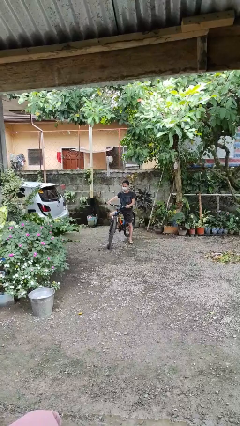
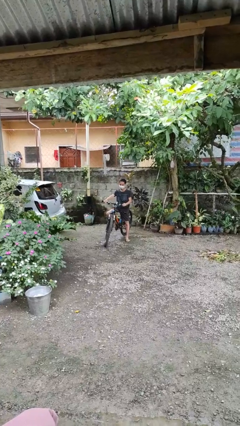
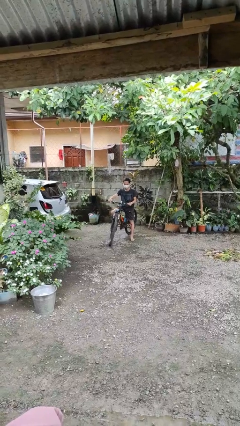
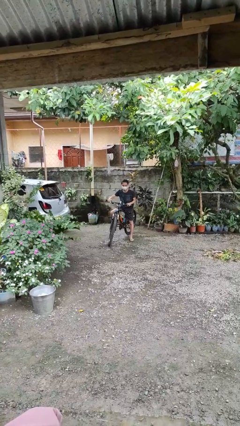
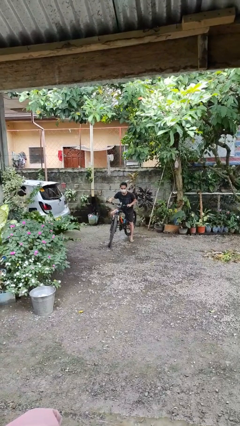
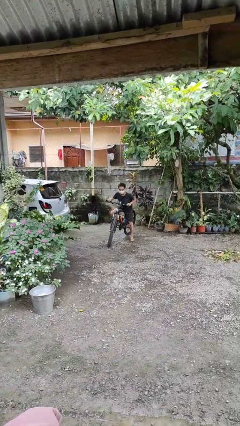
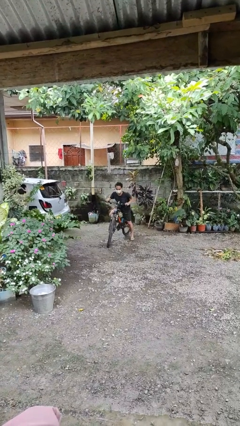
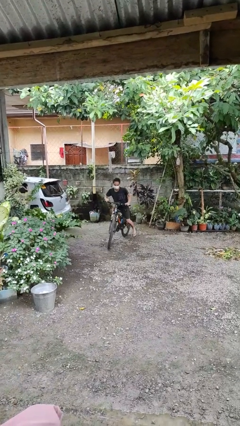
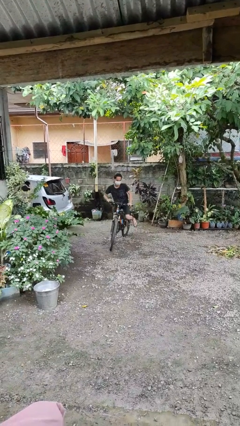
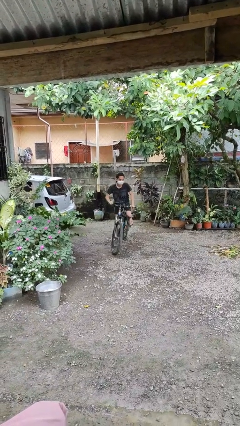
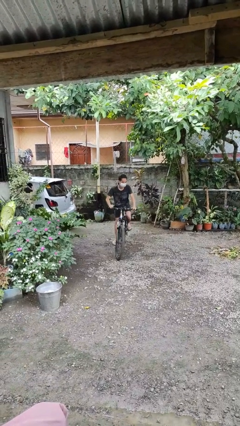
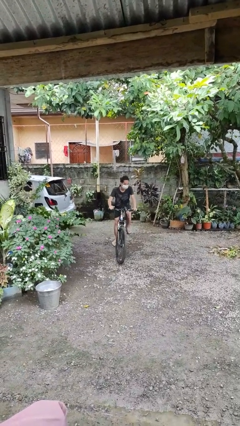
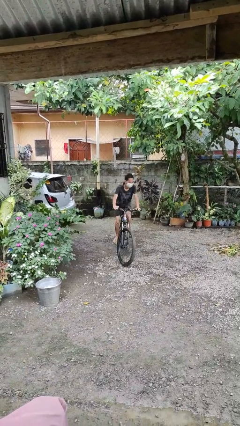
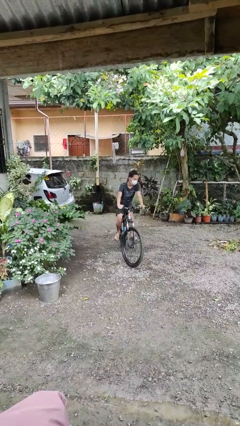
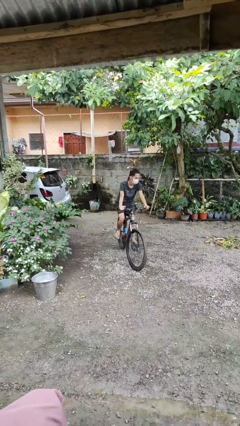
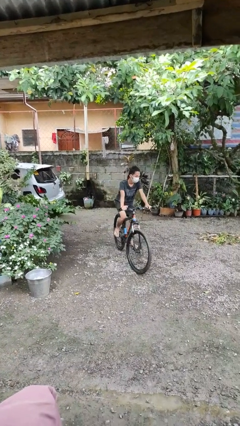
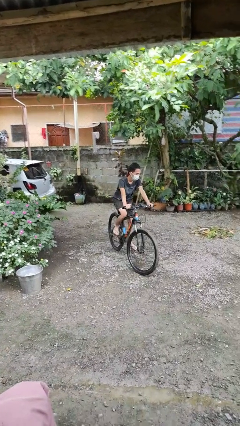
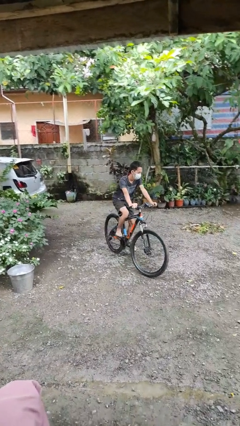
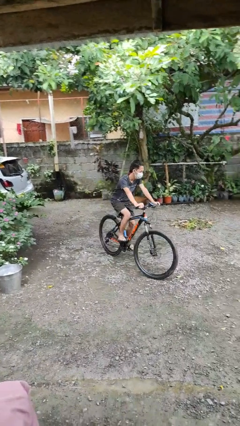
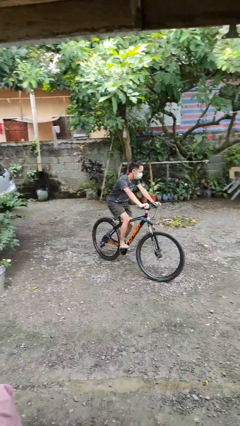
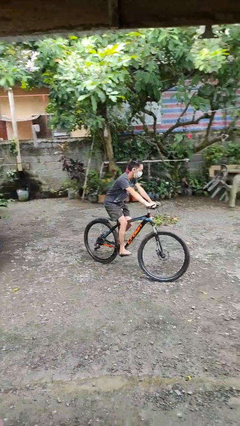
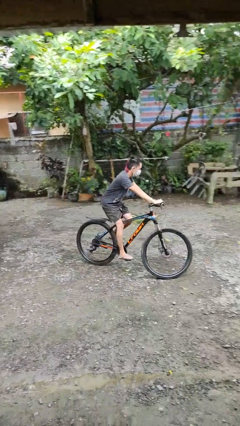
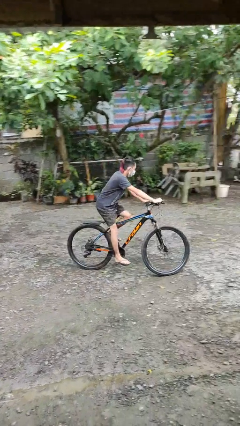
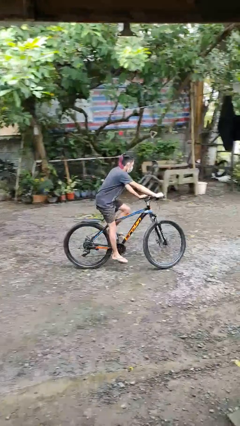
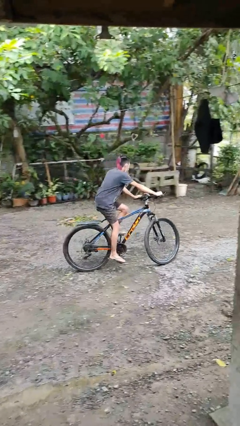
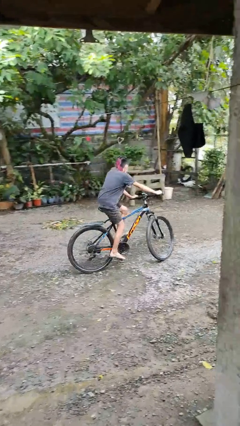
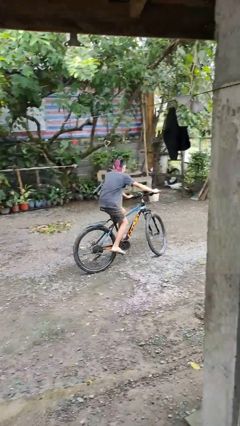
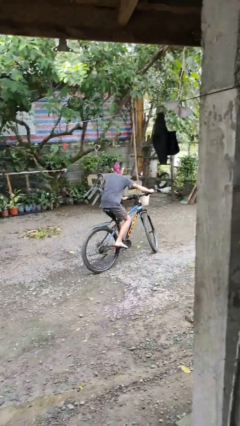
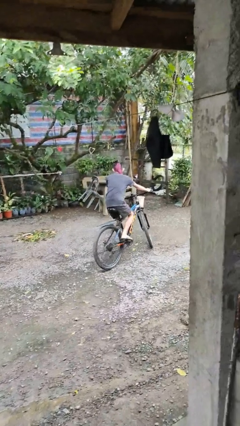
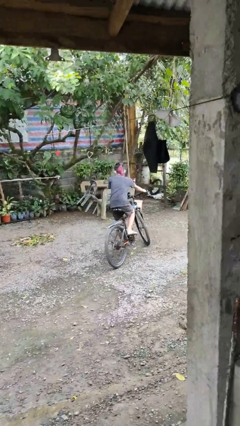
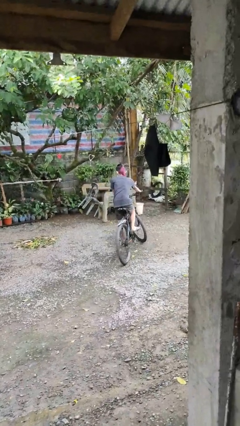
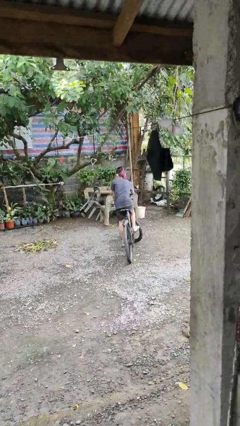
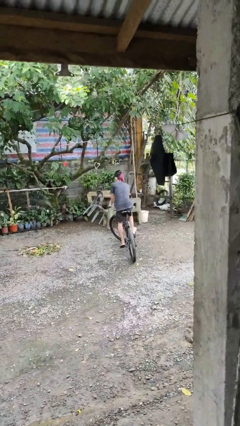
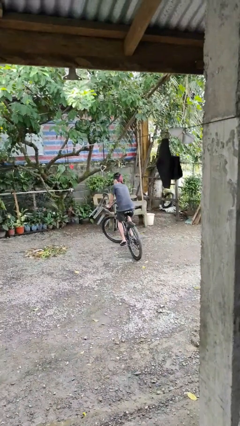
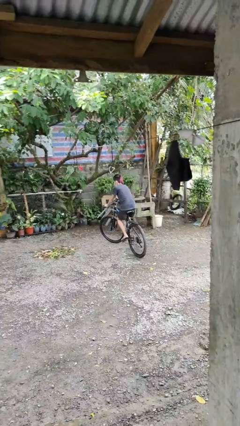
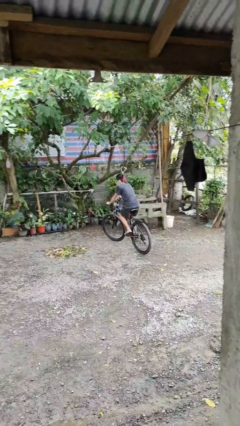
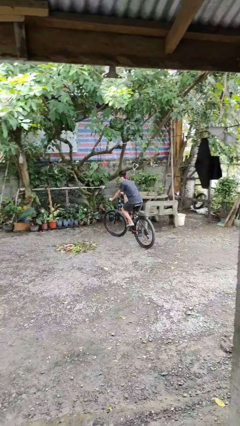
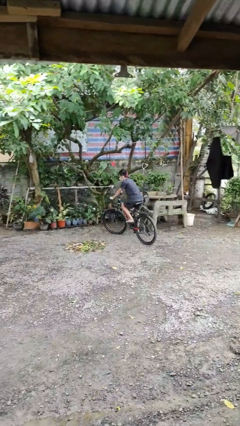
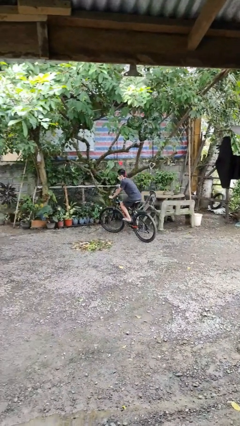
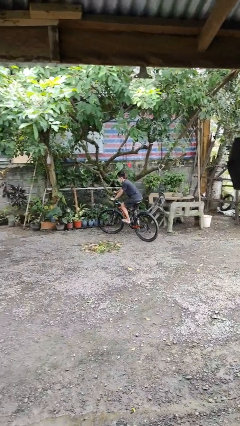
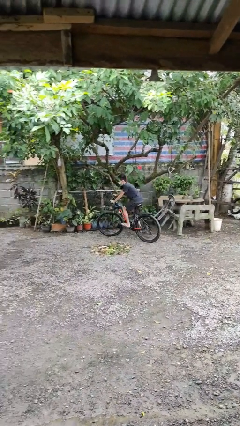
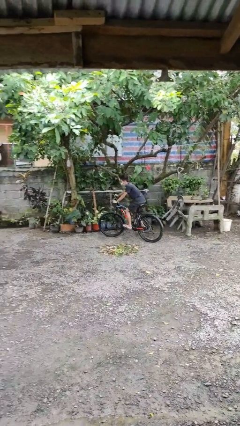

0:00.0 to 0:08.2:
person rides bicycle

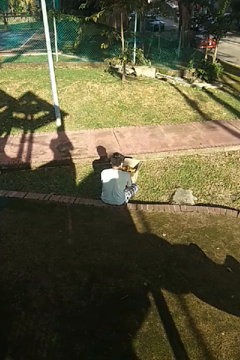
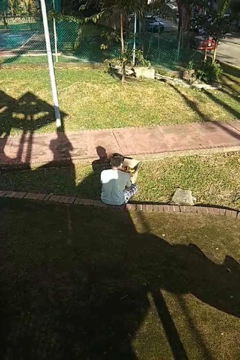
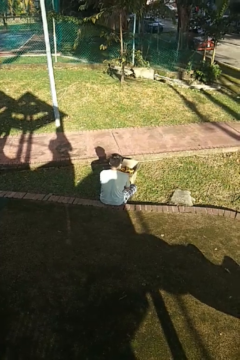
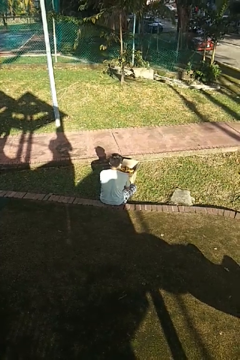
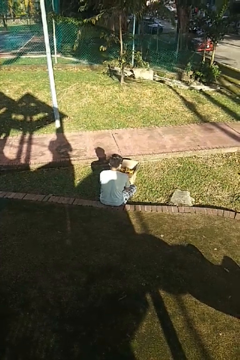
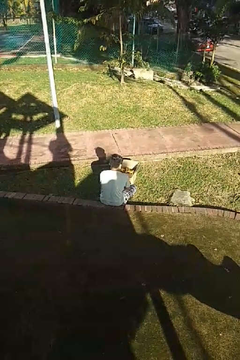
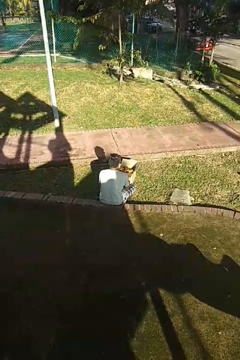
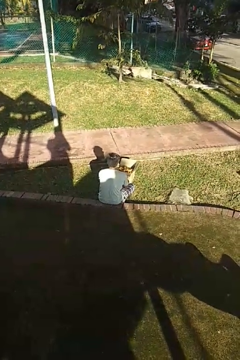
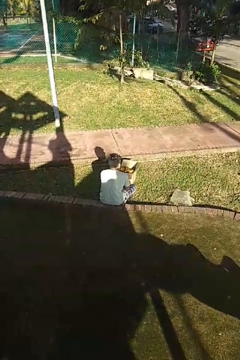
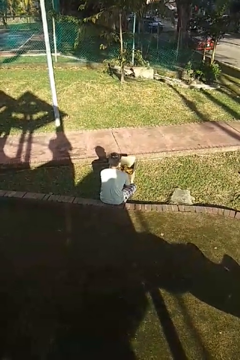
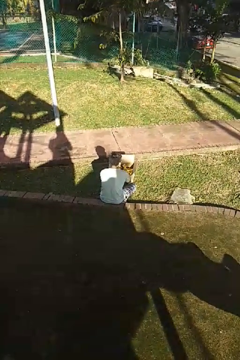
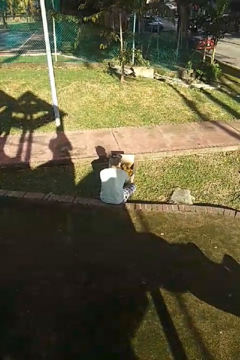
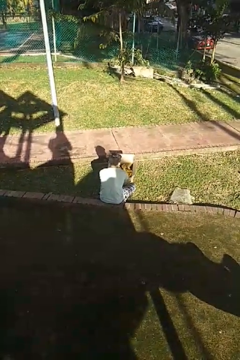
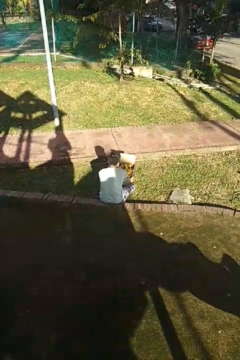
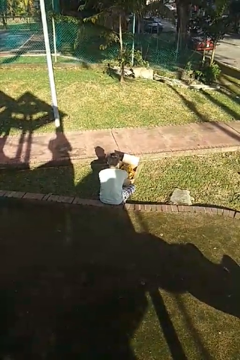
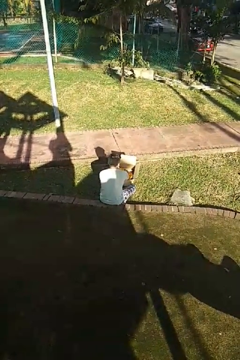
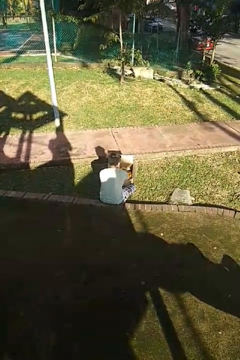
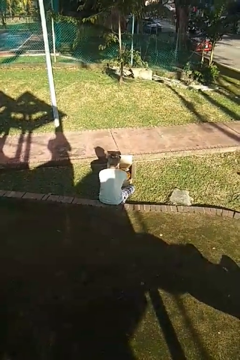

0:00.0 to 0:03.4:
person searches in box

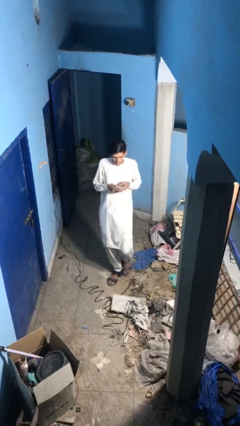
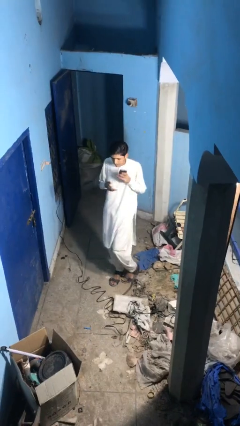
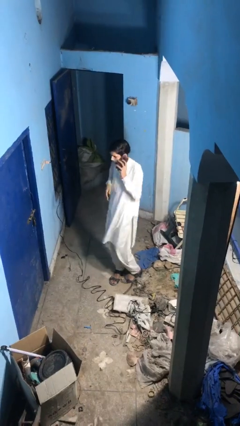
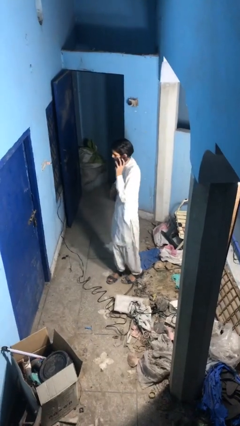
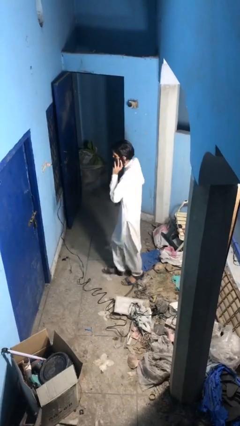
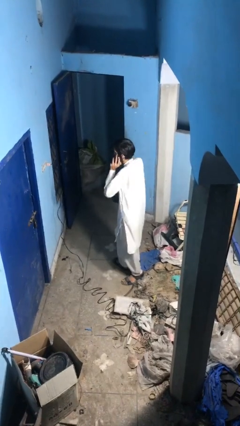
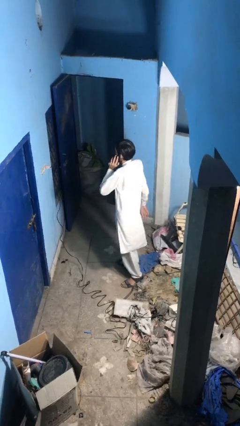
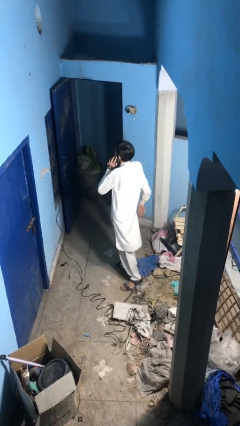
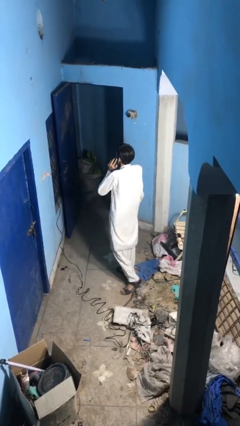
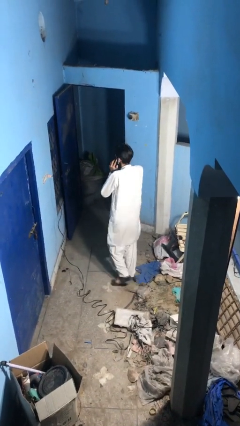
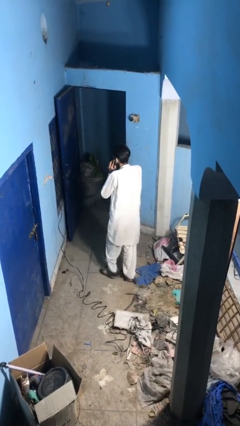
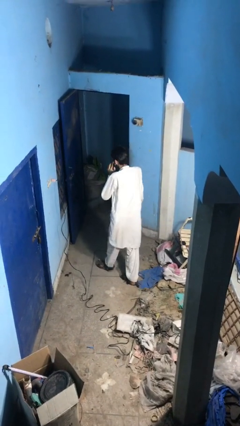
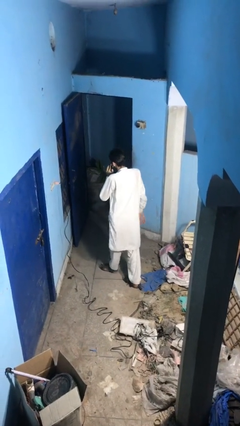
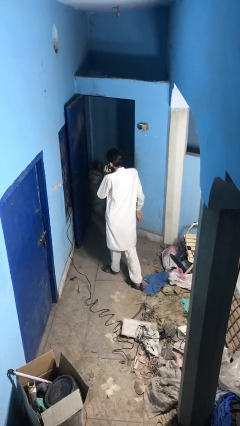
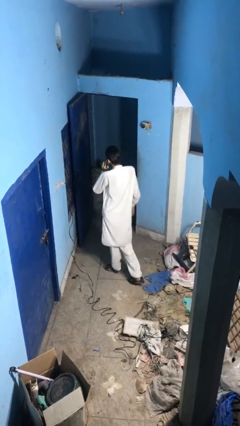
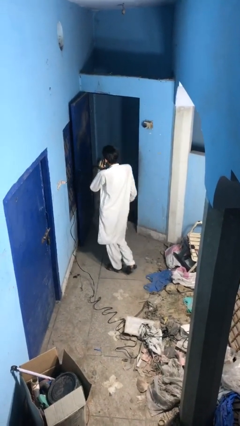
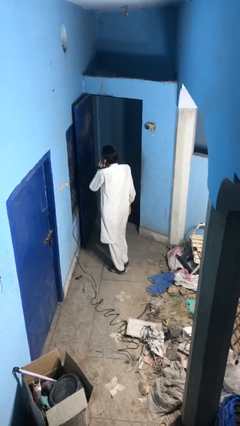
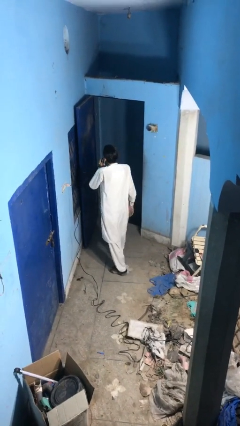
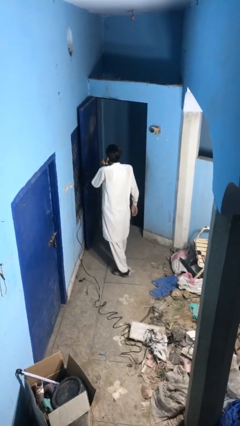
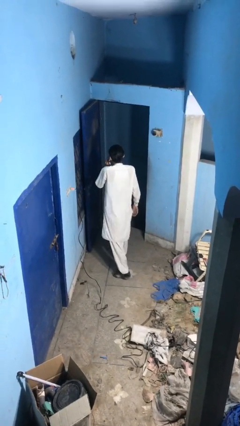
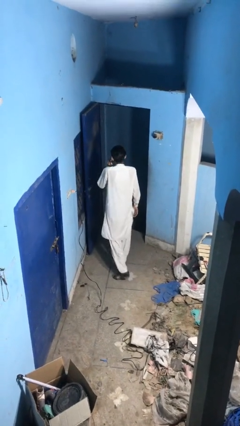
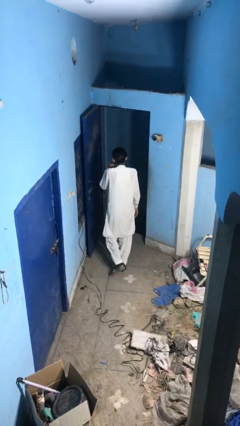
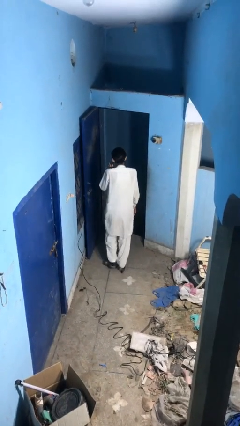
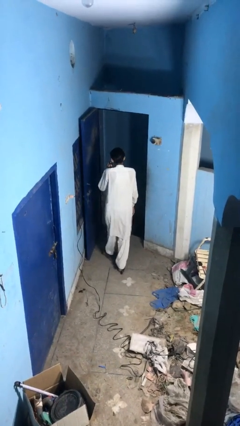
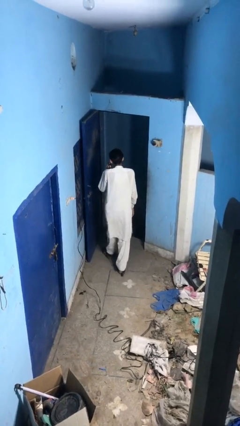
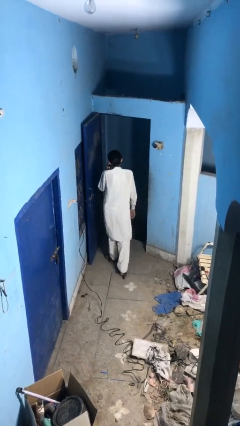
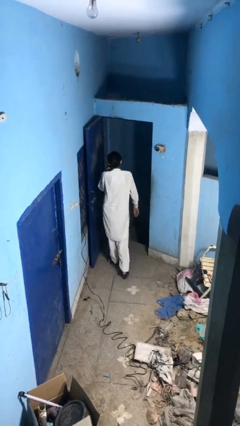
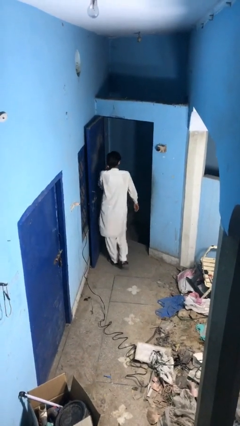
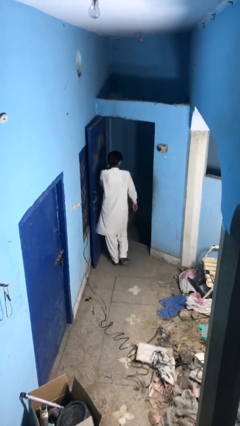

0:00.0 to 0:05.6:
person talks on phone

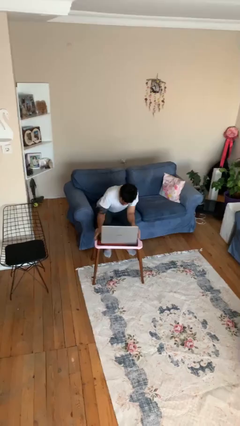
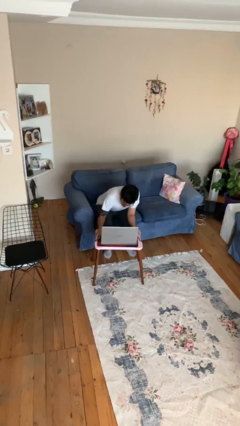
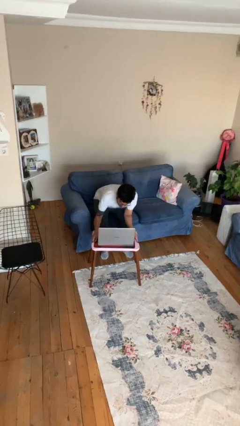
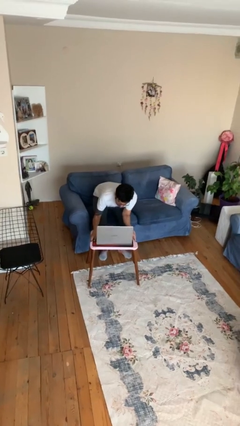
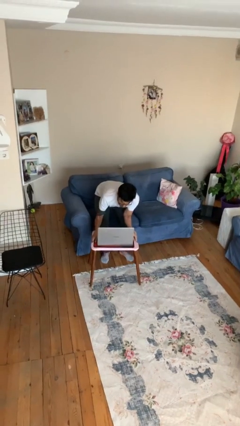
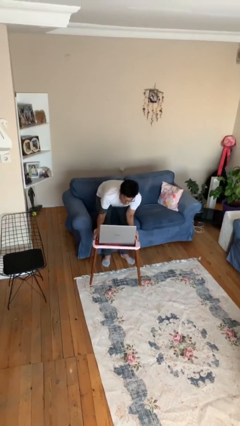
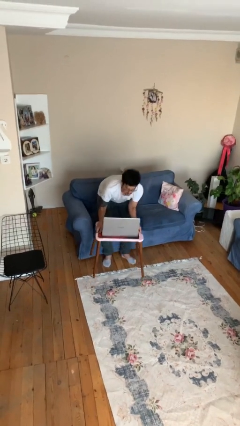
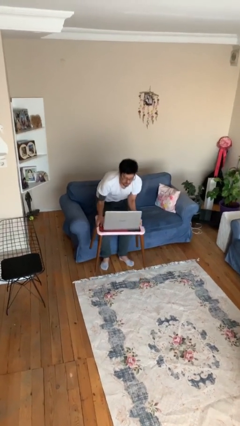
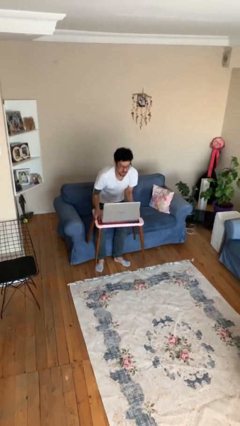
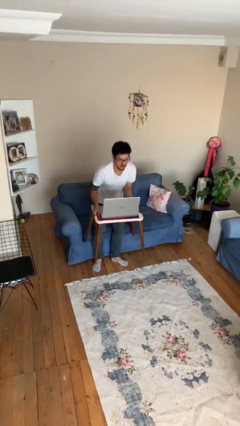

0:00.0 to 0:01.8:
person picks up object from floor
